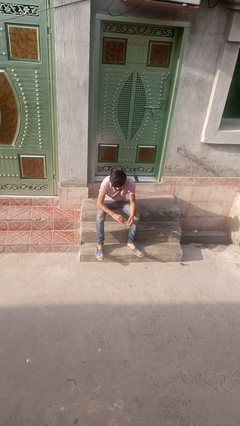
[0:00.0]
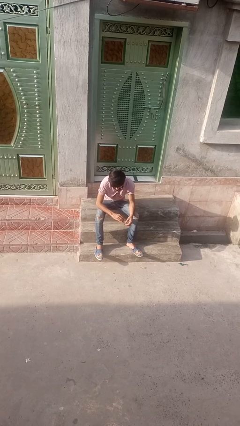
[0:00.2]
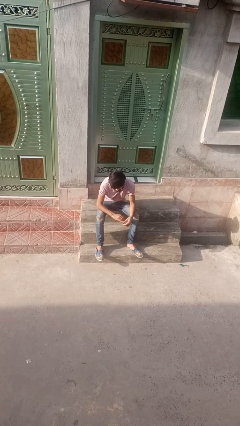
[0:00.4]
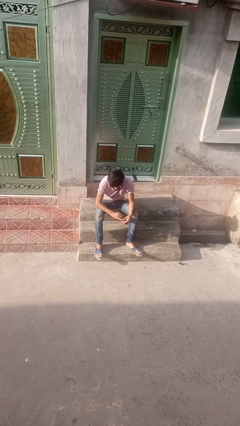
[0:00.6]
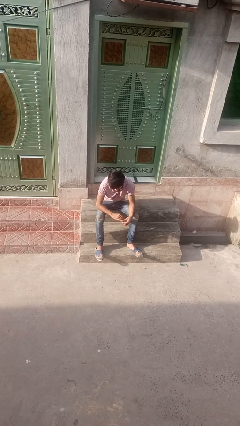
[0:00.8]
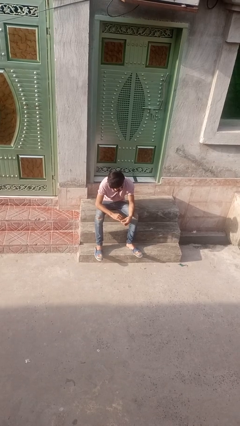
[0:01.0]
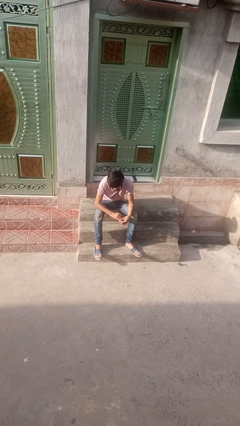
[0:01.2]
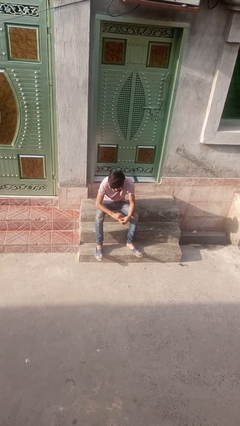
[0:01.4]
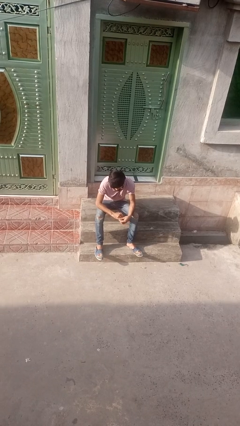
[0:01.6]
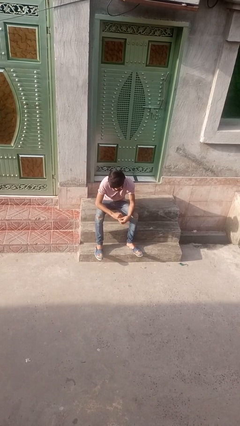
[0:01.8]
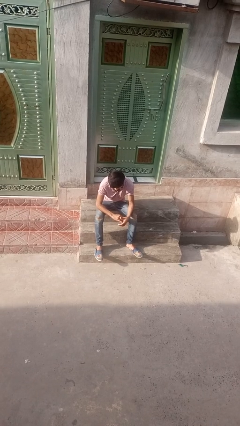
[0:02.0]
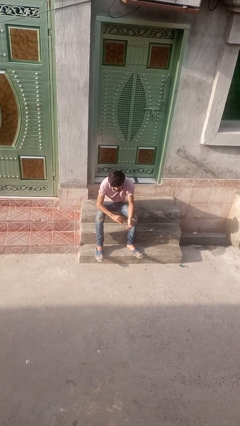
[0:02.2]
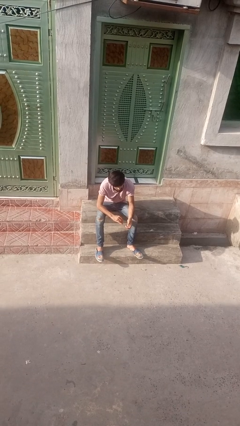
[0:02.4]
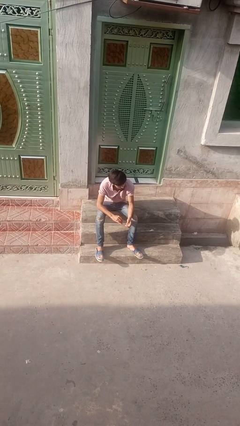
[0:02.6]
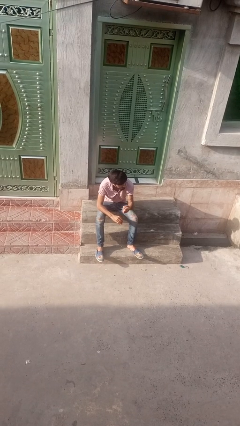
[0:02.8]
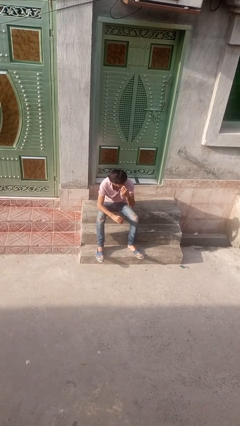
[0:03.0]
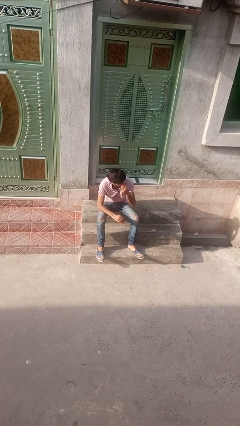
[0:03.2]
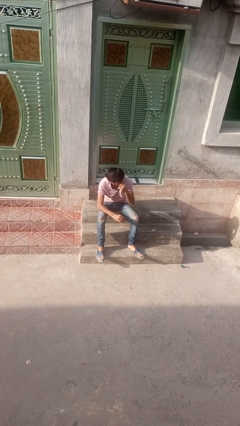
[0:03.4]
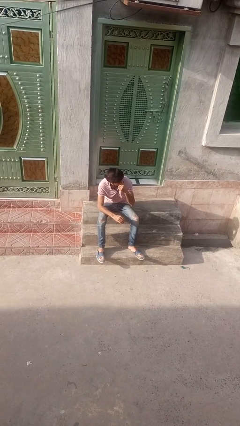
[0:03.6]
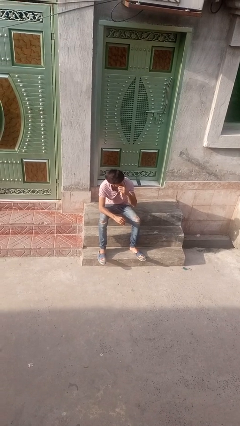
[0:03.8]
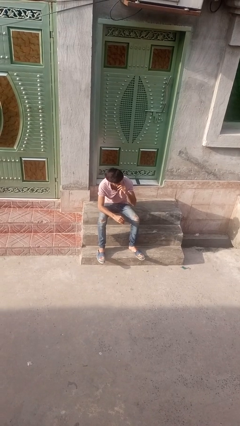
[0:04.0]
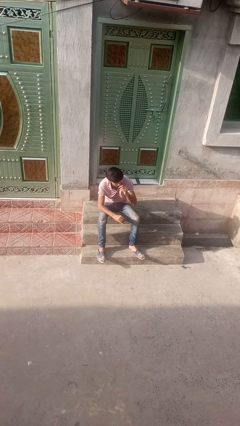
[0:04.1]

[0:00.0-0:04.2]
person puts on ring

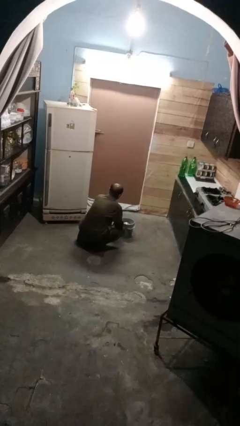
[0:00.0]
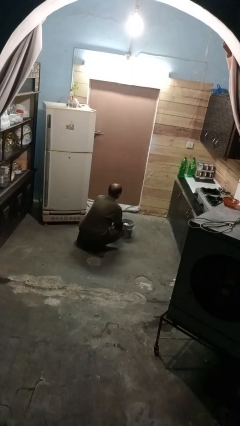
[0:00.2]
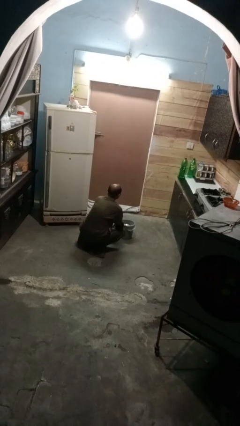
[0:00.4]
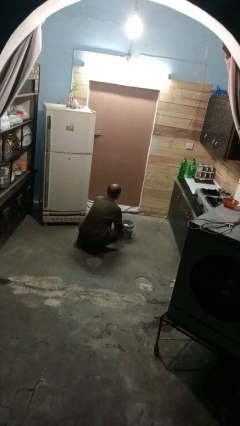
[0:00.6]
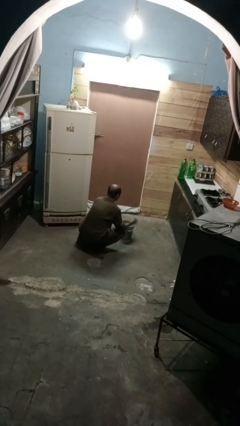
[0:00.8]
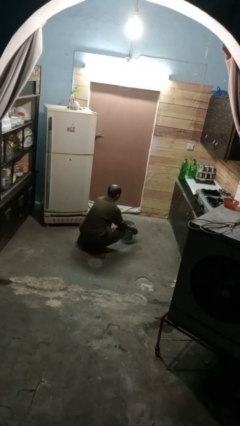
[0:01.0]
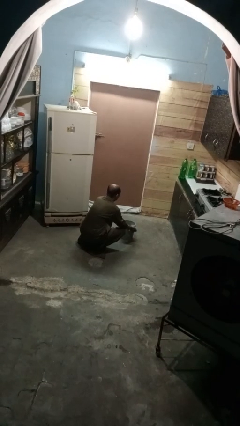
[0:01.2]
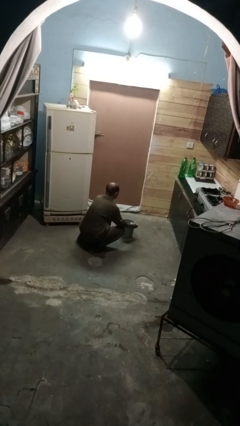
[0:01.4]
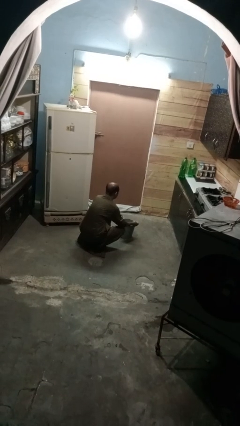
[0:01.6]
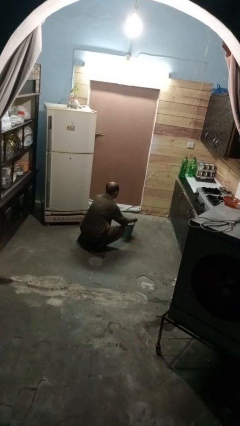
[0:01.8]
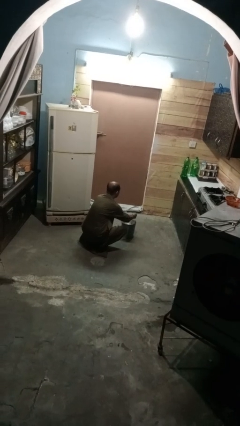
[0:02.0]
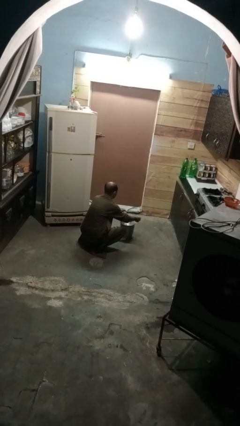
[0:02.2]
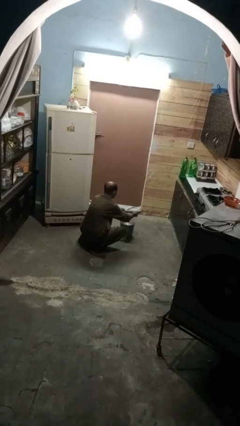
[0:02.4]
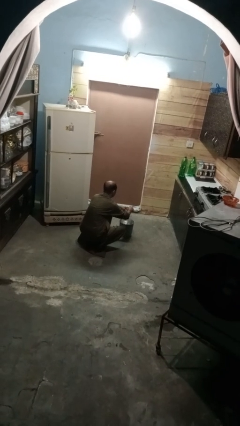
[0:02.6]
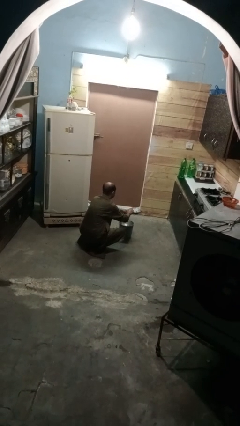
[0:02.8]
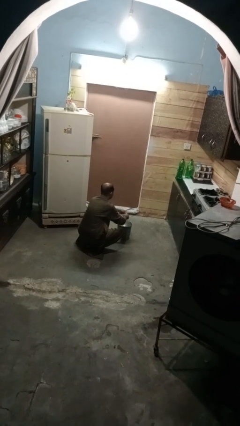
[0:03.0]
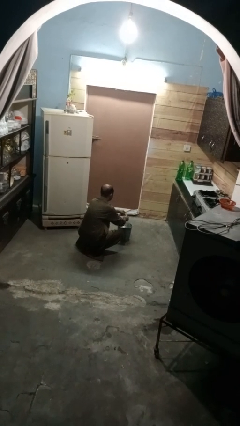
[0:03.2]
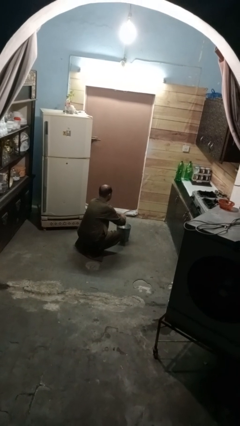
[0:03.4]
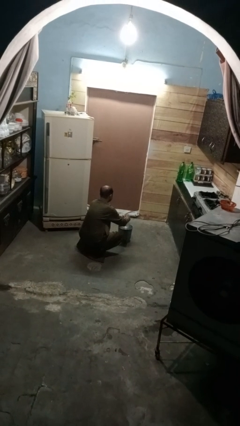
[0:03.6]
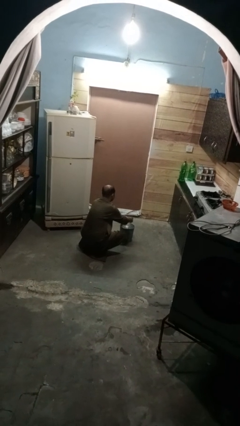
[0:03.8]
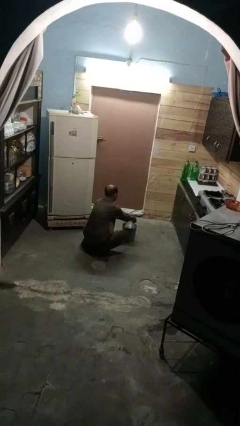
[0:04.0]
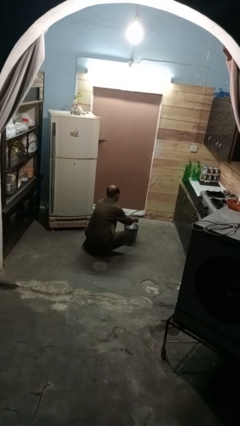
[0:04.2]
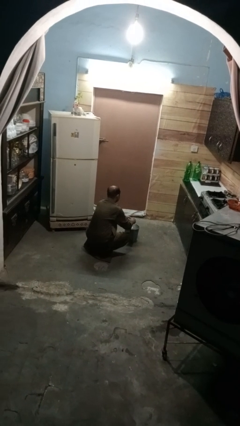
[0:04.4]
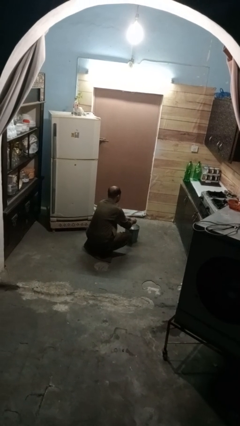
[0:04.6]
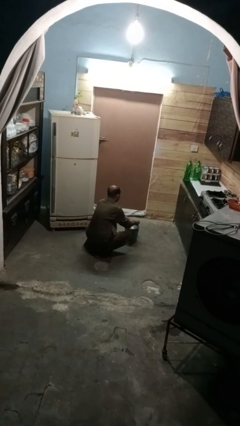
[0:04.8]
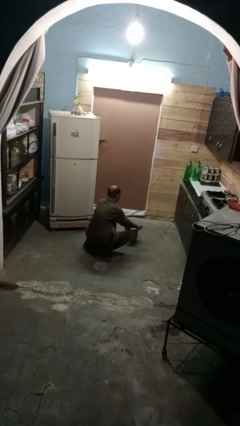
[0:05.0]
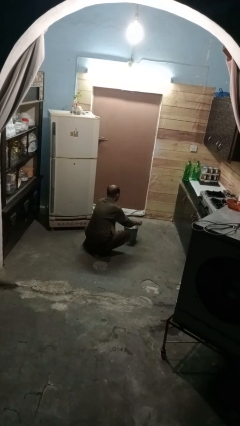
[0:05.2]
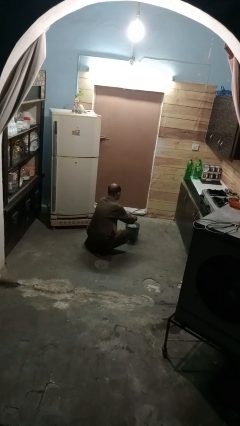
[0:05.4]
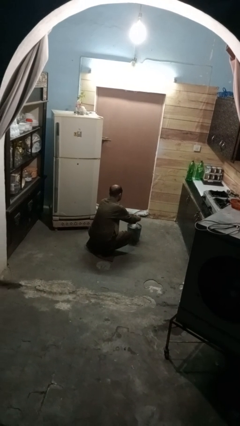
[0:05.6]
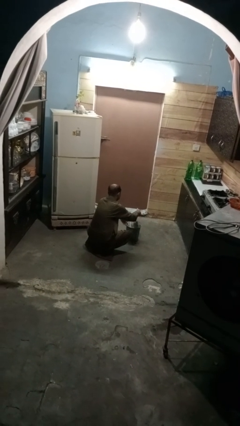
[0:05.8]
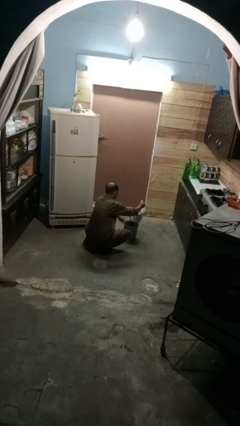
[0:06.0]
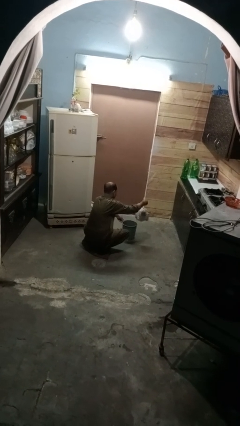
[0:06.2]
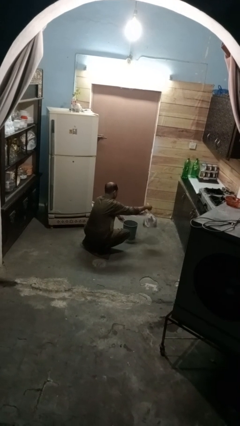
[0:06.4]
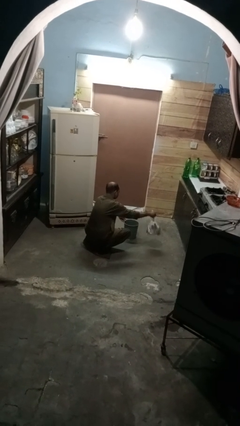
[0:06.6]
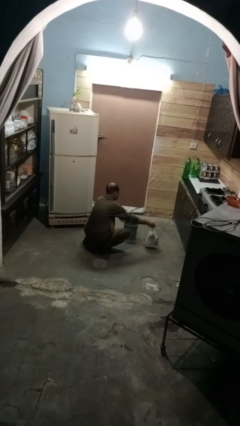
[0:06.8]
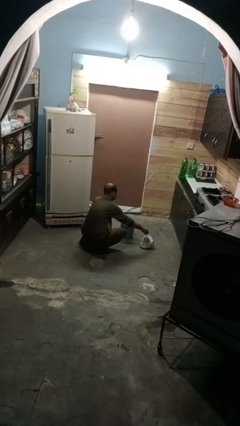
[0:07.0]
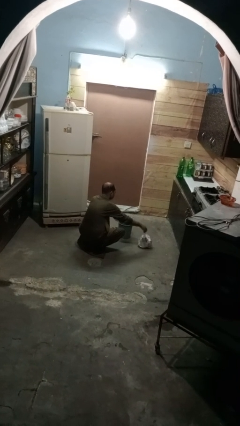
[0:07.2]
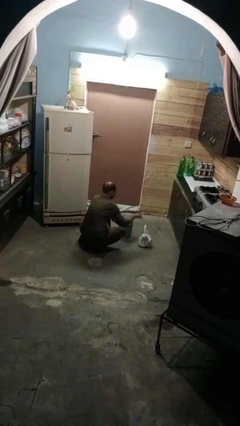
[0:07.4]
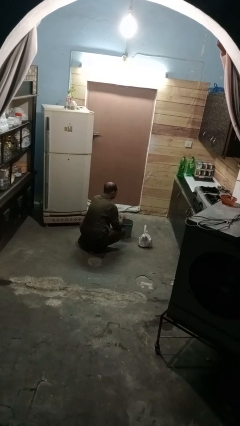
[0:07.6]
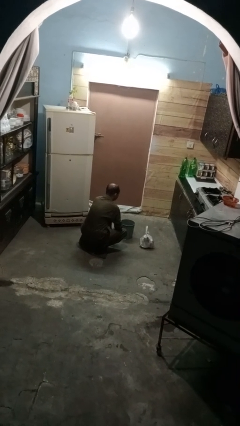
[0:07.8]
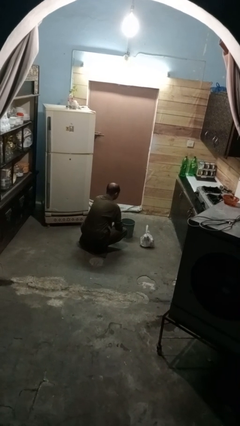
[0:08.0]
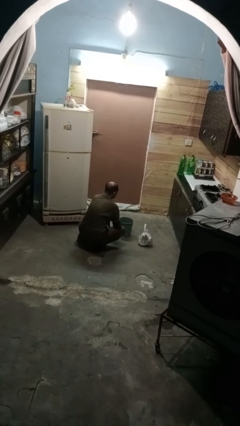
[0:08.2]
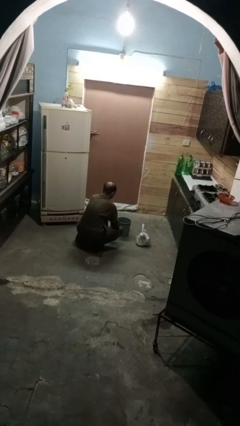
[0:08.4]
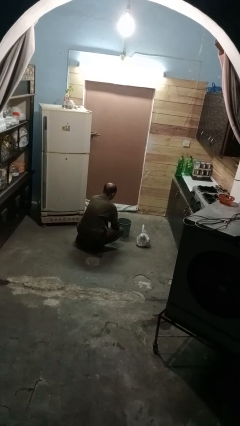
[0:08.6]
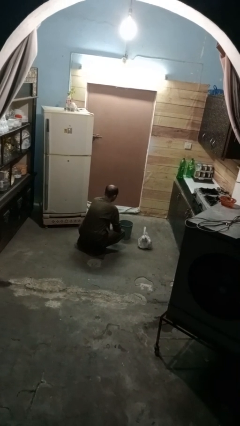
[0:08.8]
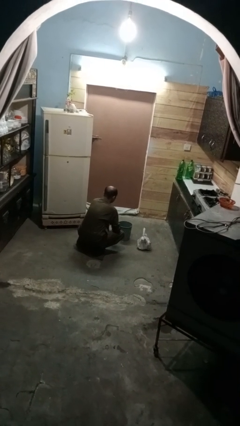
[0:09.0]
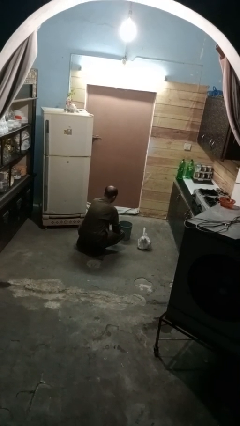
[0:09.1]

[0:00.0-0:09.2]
person removes trashbag from trashcan

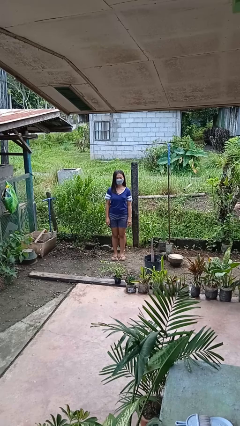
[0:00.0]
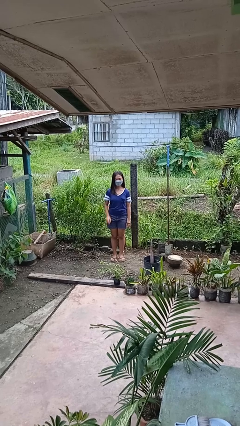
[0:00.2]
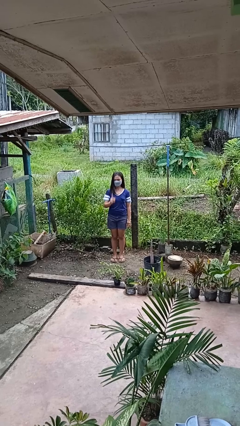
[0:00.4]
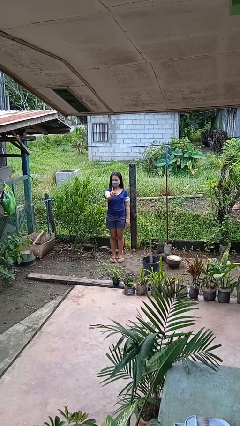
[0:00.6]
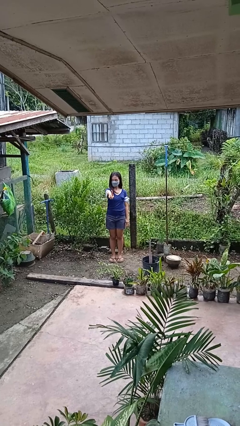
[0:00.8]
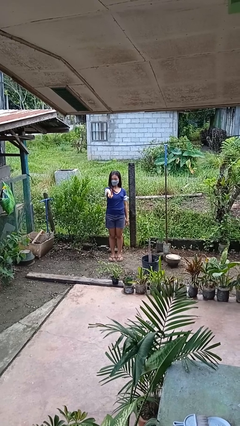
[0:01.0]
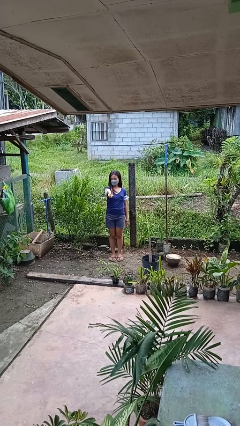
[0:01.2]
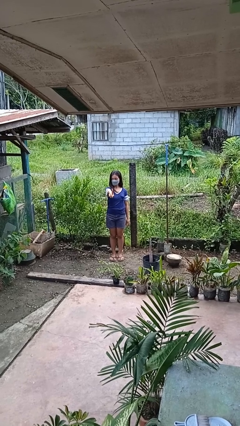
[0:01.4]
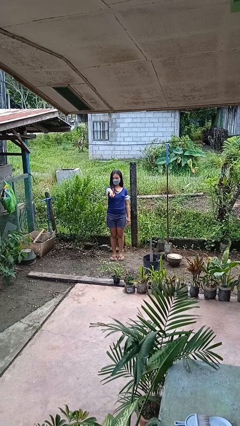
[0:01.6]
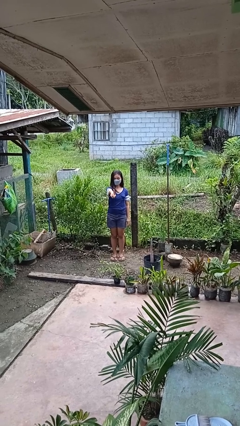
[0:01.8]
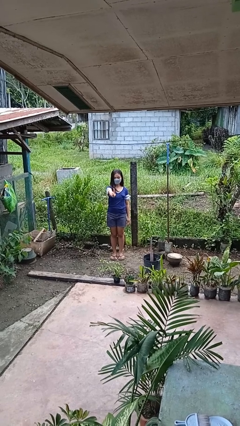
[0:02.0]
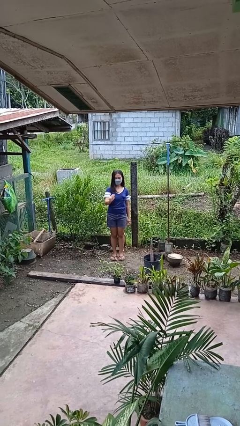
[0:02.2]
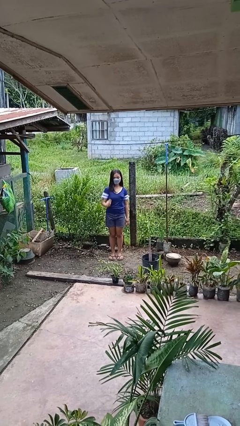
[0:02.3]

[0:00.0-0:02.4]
person gestures number one

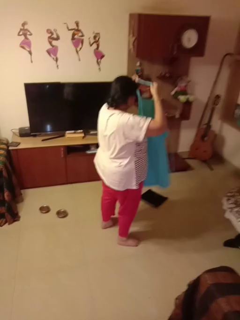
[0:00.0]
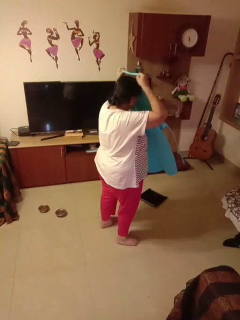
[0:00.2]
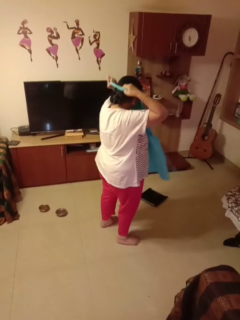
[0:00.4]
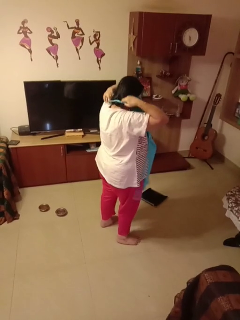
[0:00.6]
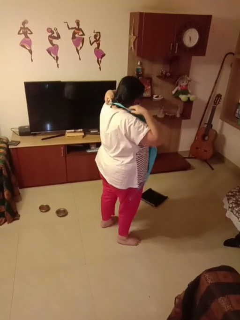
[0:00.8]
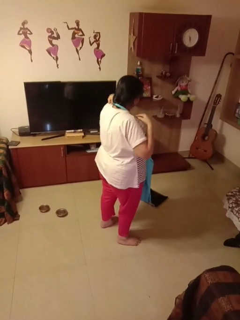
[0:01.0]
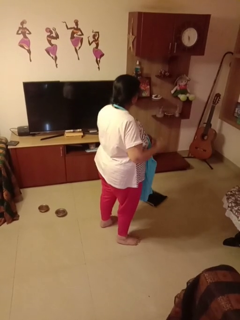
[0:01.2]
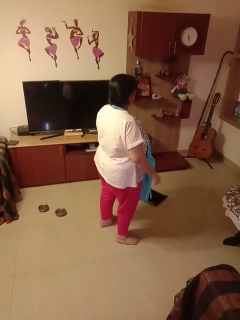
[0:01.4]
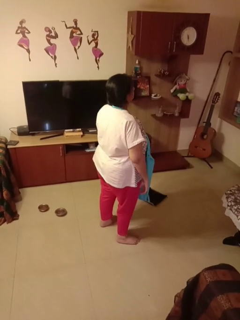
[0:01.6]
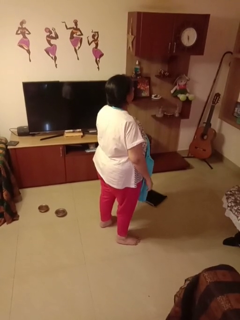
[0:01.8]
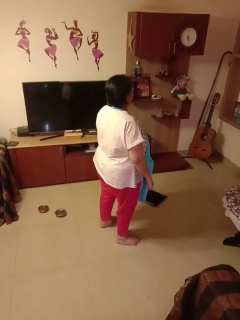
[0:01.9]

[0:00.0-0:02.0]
person puts on apron

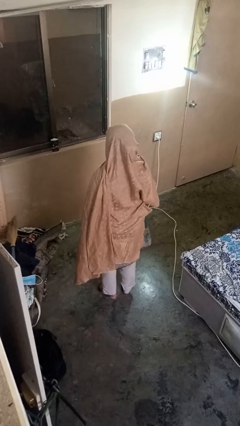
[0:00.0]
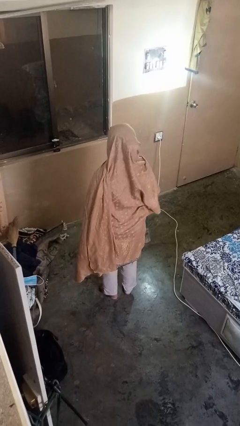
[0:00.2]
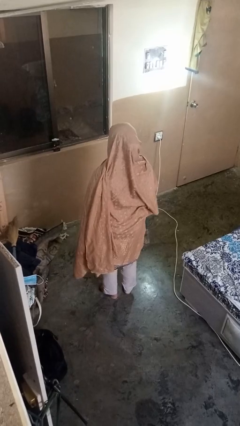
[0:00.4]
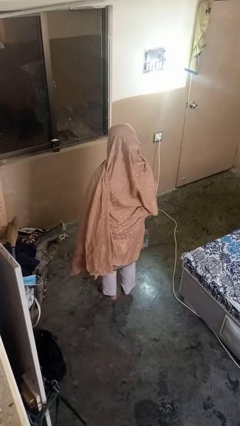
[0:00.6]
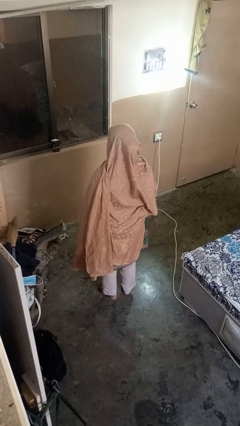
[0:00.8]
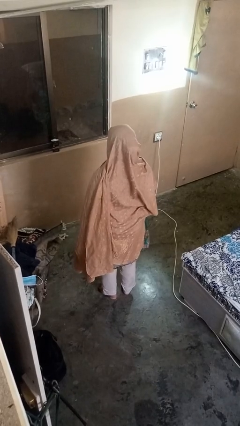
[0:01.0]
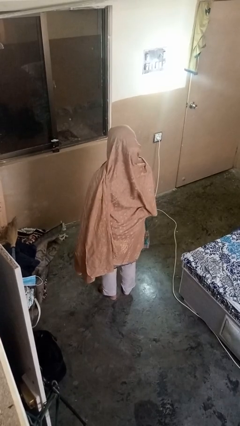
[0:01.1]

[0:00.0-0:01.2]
person punches
